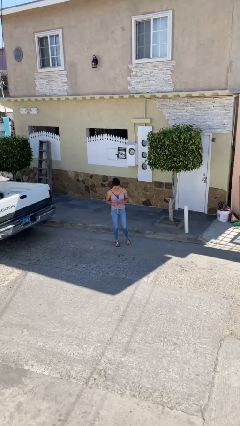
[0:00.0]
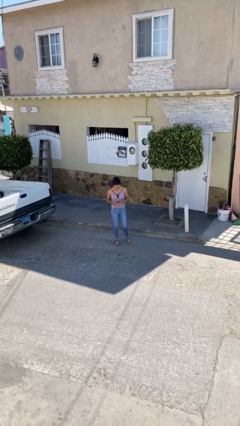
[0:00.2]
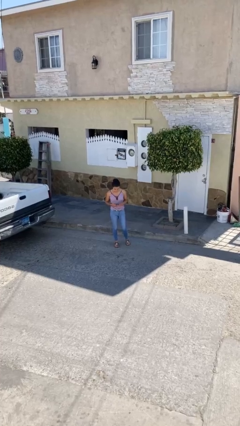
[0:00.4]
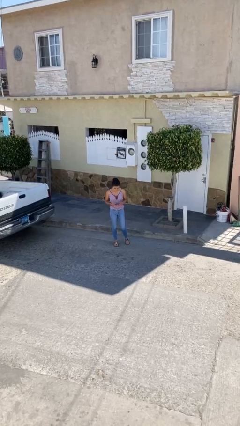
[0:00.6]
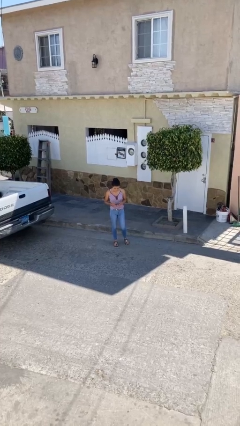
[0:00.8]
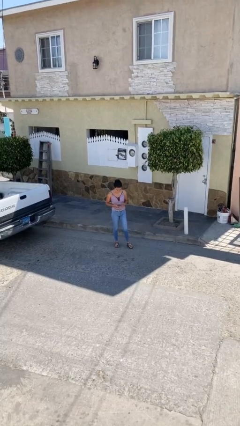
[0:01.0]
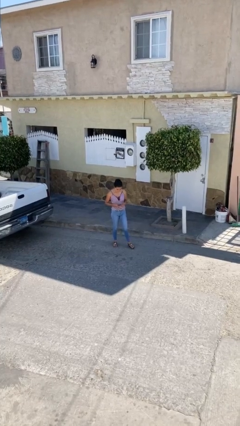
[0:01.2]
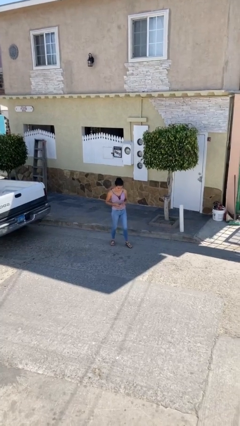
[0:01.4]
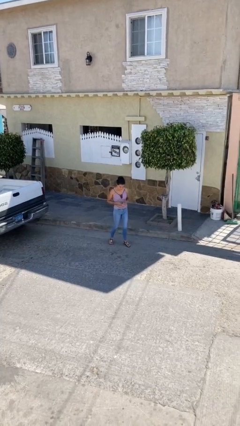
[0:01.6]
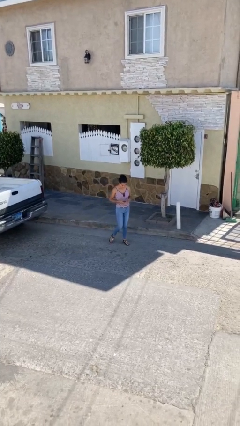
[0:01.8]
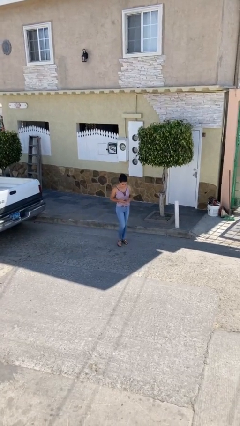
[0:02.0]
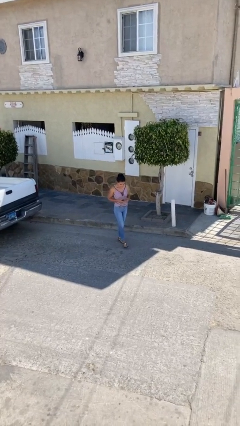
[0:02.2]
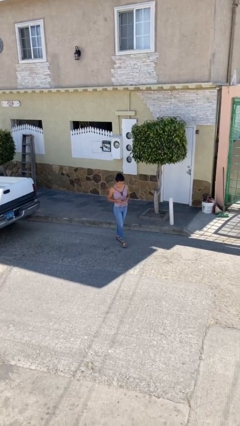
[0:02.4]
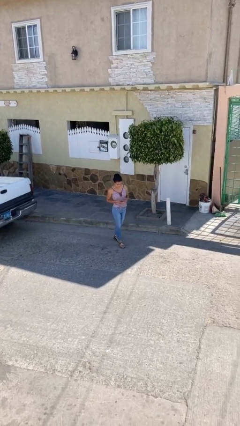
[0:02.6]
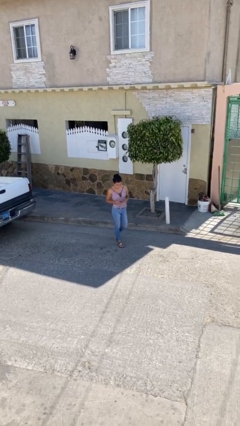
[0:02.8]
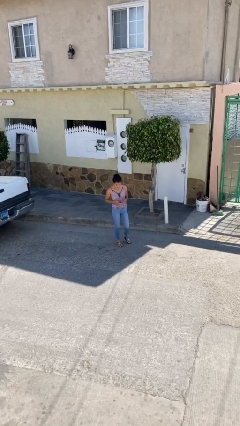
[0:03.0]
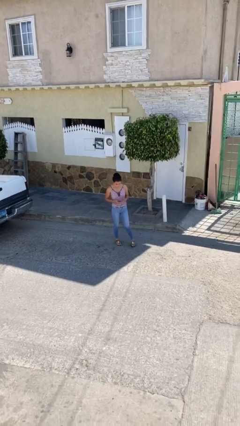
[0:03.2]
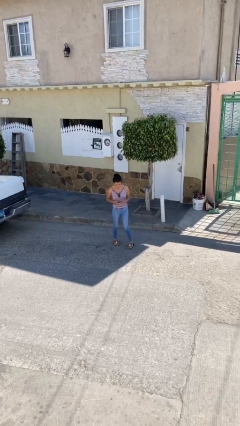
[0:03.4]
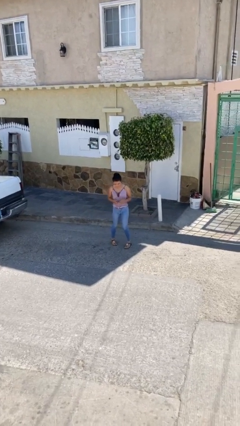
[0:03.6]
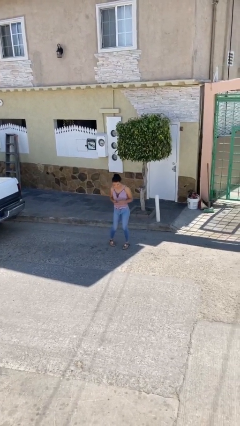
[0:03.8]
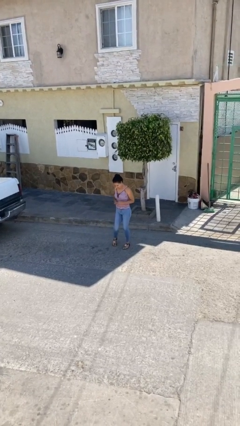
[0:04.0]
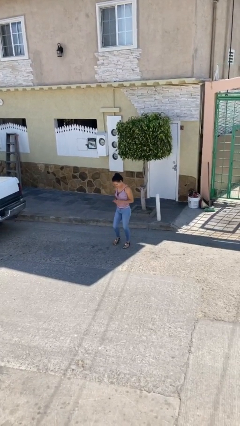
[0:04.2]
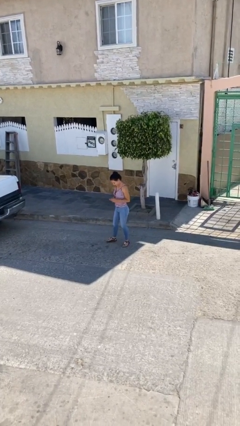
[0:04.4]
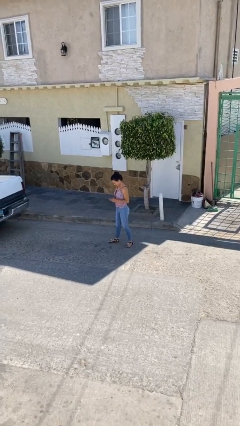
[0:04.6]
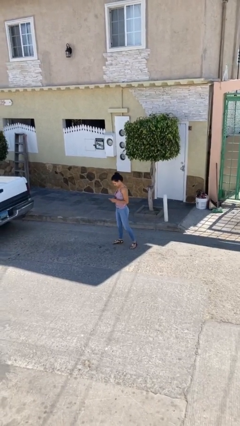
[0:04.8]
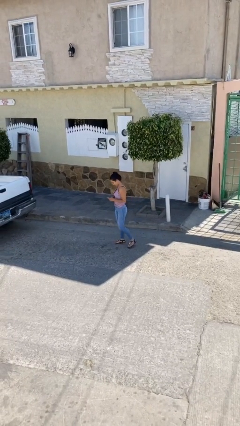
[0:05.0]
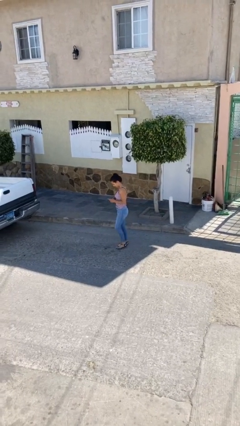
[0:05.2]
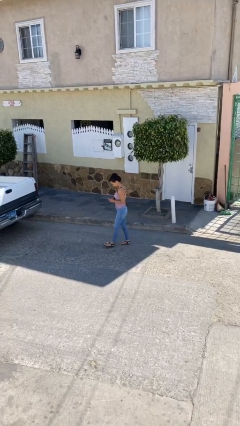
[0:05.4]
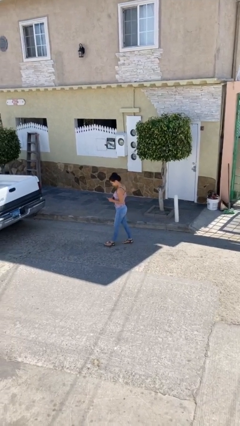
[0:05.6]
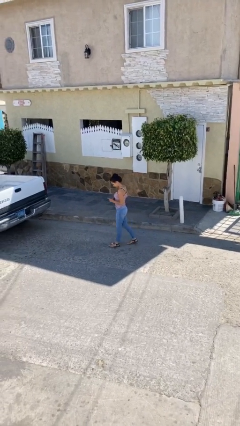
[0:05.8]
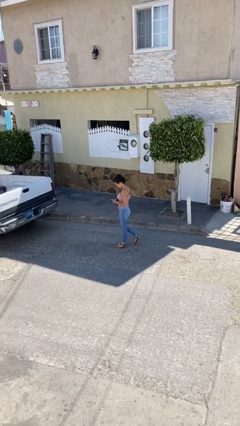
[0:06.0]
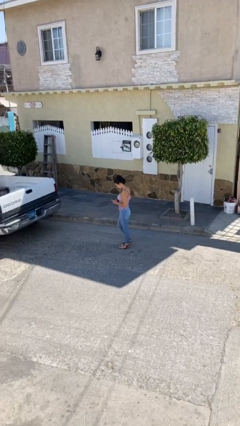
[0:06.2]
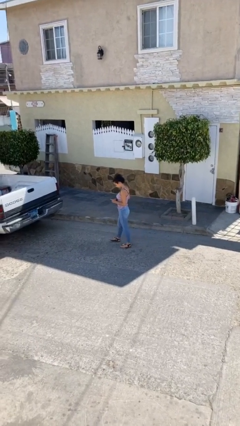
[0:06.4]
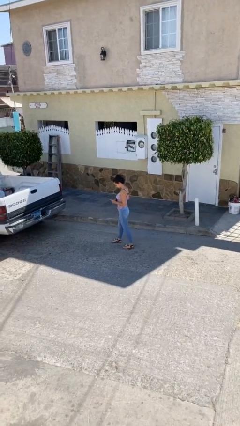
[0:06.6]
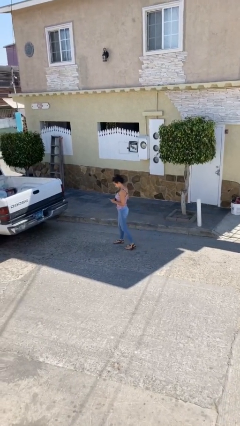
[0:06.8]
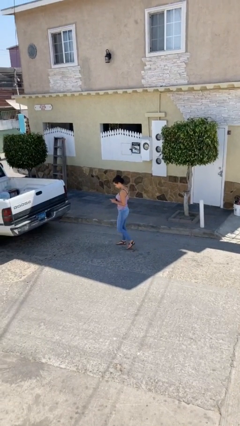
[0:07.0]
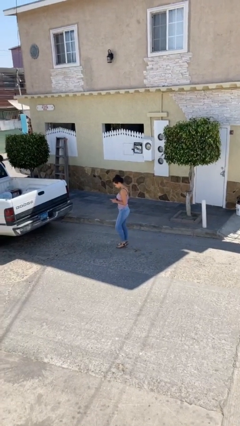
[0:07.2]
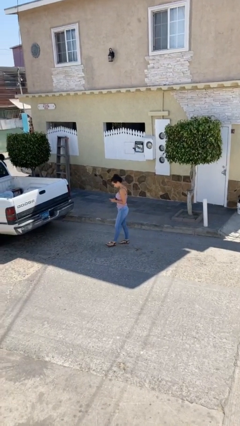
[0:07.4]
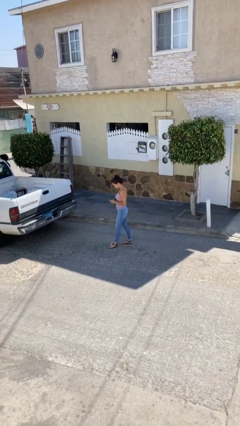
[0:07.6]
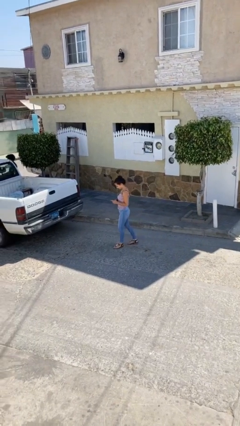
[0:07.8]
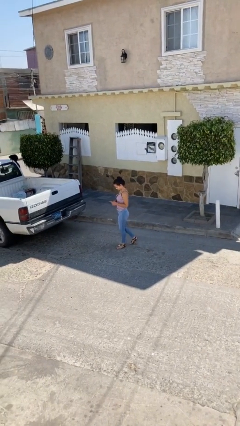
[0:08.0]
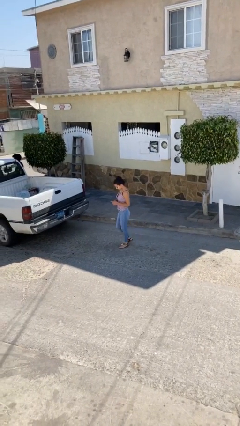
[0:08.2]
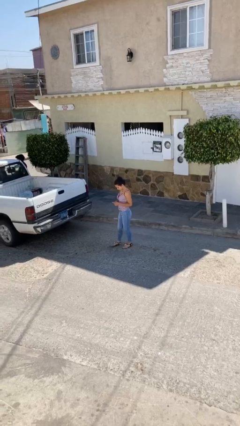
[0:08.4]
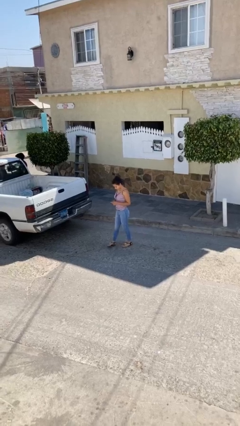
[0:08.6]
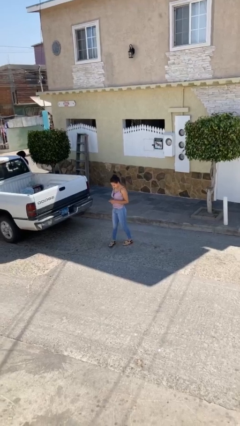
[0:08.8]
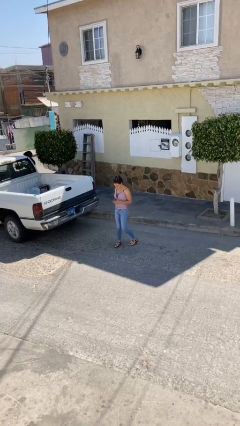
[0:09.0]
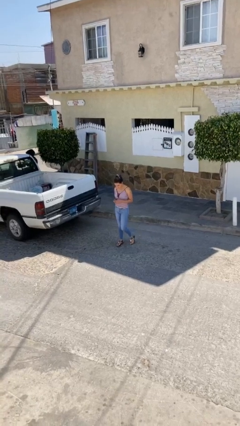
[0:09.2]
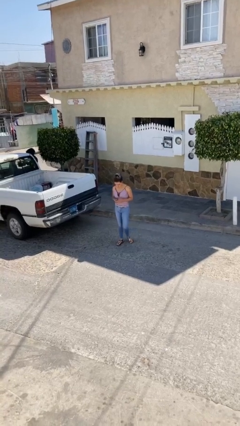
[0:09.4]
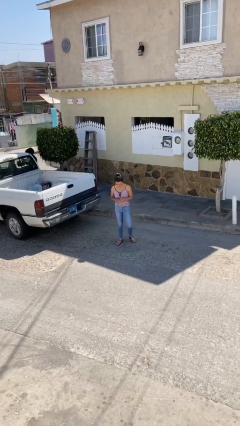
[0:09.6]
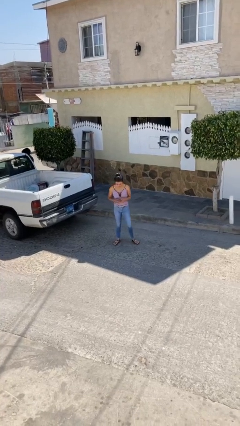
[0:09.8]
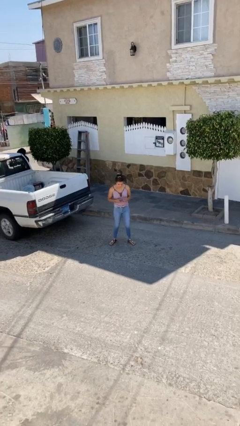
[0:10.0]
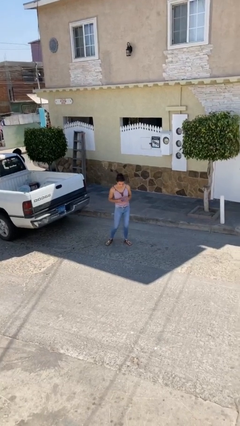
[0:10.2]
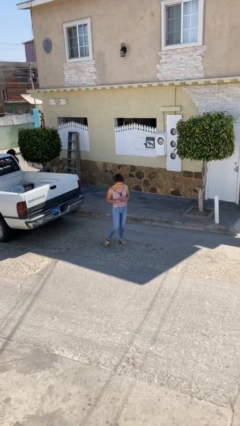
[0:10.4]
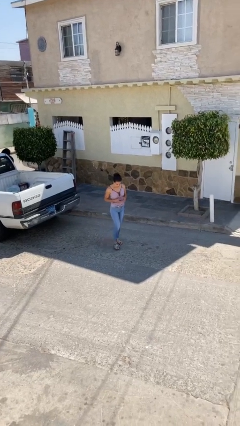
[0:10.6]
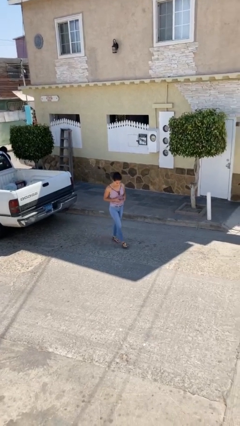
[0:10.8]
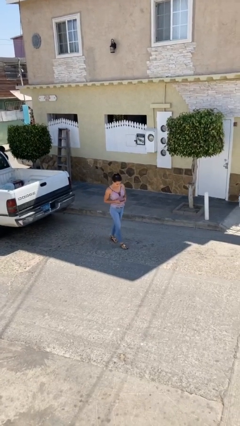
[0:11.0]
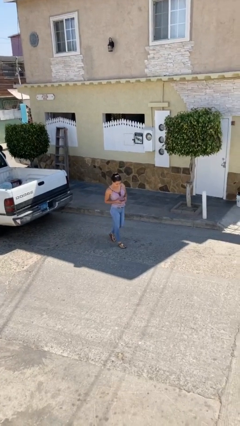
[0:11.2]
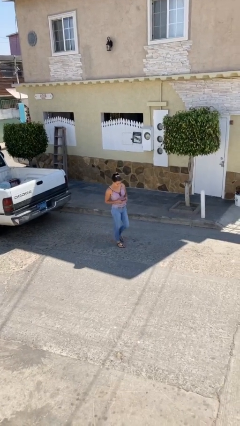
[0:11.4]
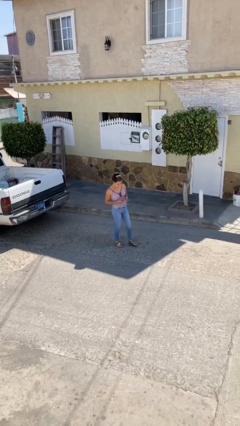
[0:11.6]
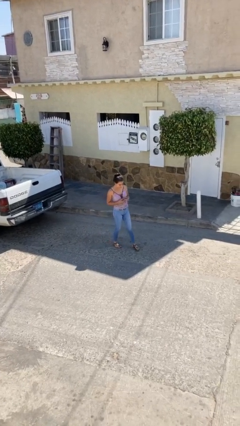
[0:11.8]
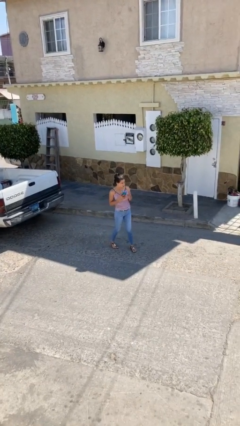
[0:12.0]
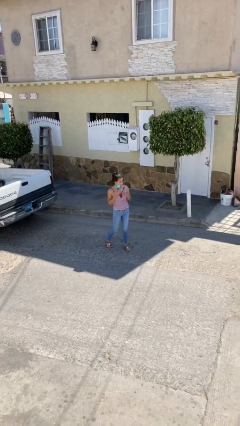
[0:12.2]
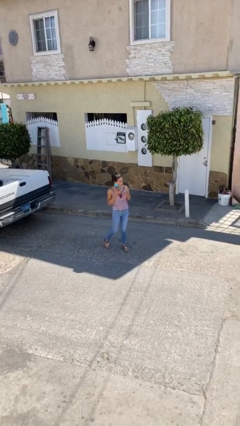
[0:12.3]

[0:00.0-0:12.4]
person texts on phone

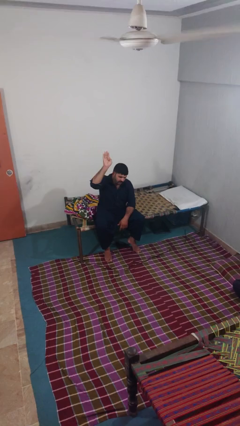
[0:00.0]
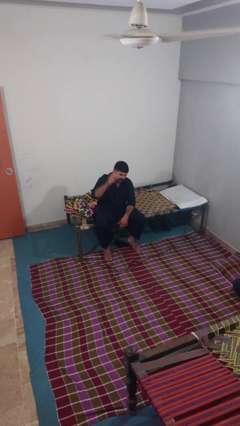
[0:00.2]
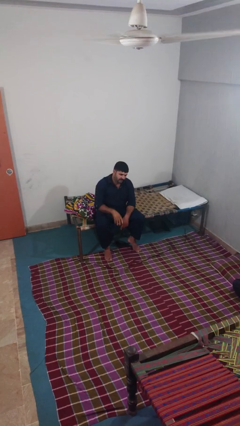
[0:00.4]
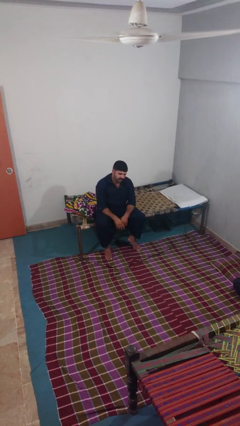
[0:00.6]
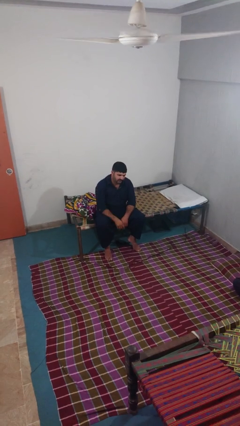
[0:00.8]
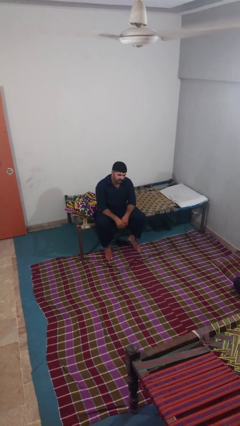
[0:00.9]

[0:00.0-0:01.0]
person gestures swipe down

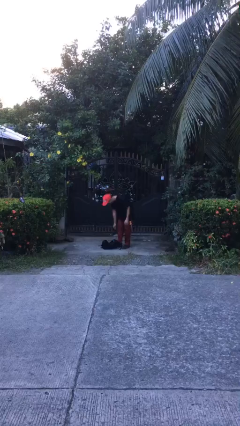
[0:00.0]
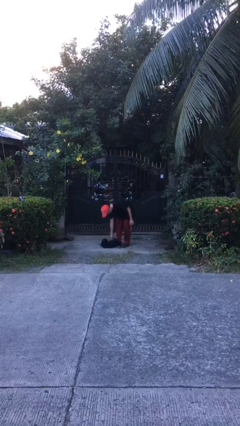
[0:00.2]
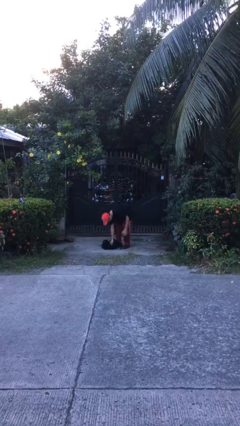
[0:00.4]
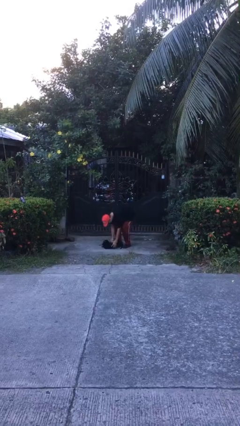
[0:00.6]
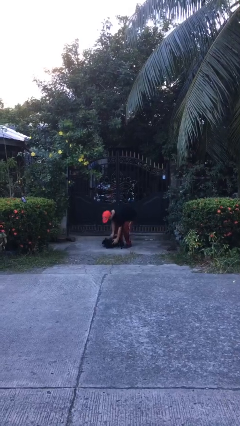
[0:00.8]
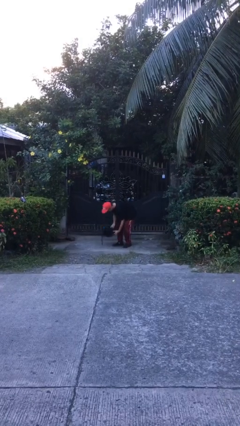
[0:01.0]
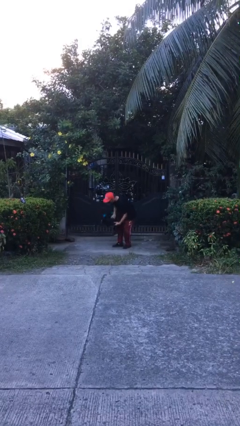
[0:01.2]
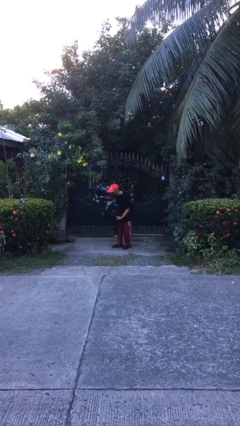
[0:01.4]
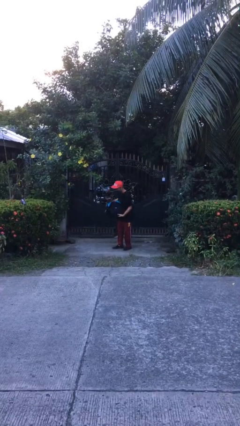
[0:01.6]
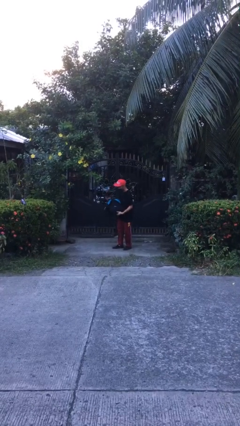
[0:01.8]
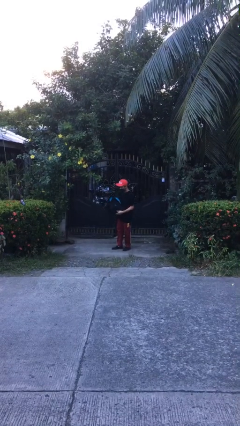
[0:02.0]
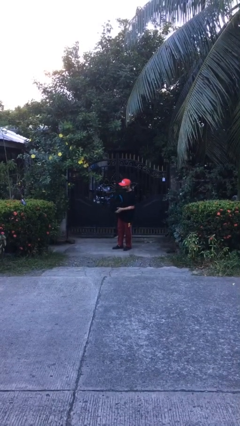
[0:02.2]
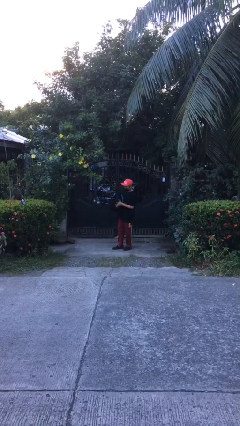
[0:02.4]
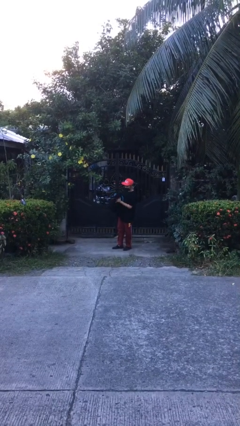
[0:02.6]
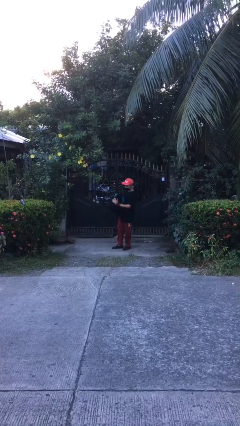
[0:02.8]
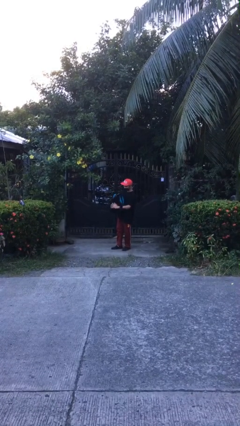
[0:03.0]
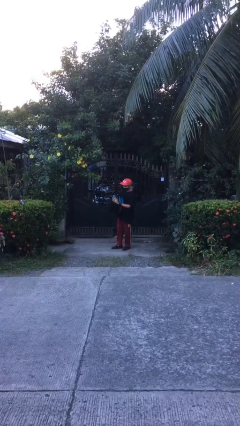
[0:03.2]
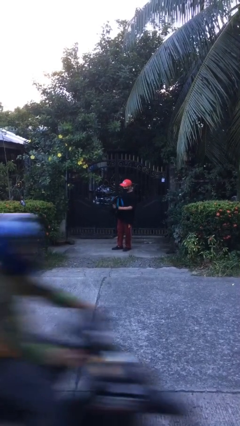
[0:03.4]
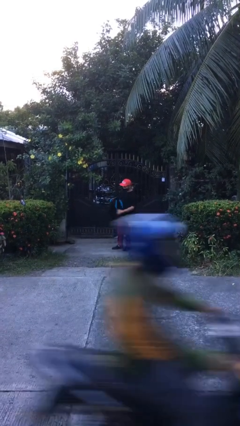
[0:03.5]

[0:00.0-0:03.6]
person picks up object from floor

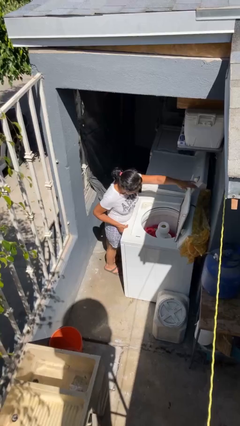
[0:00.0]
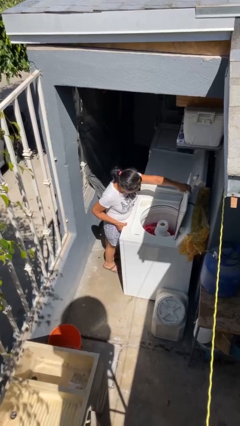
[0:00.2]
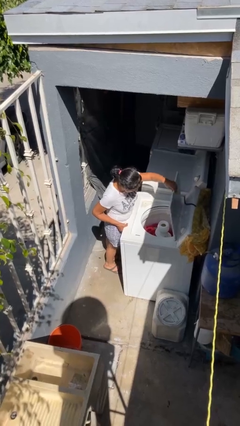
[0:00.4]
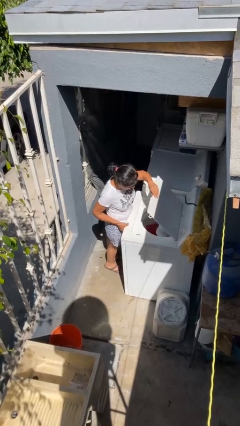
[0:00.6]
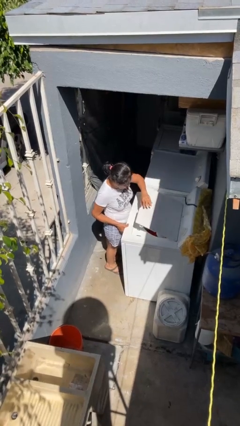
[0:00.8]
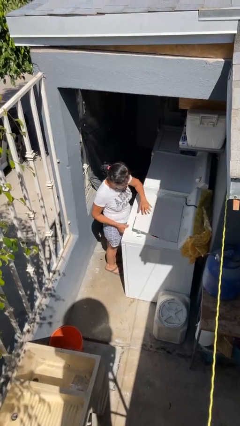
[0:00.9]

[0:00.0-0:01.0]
person closes clothes washer
